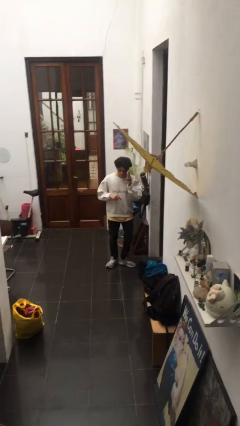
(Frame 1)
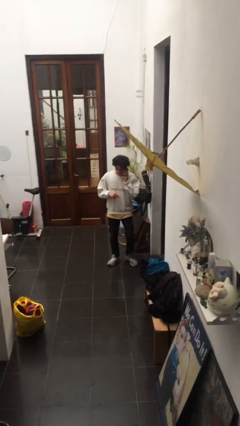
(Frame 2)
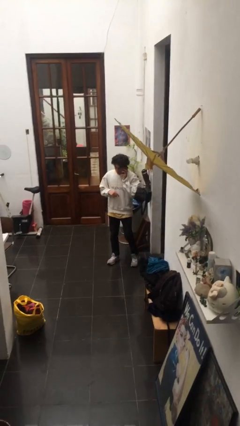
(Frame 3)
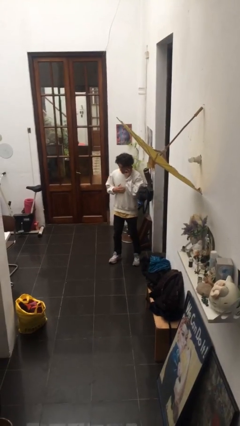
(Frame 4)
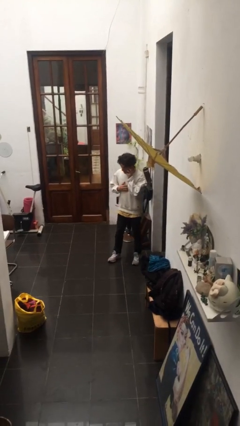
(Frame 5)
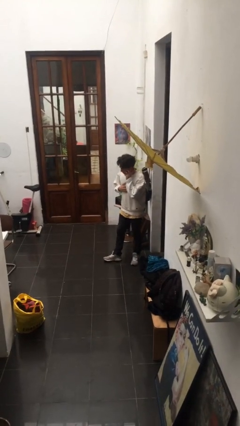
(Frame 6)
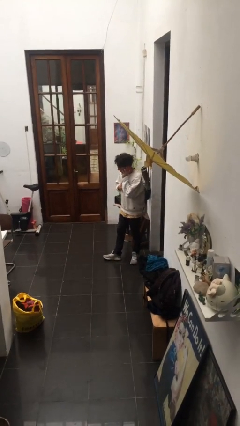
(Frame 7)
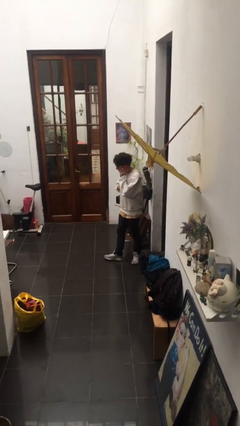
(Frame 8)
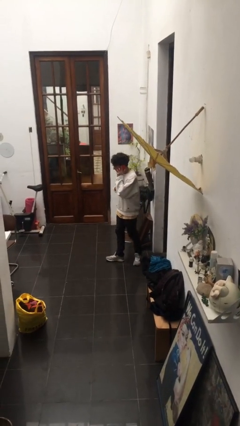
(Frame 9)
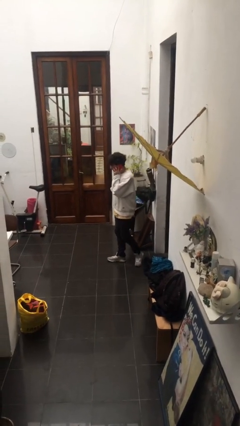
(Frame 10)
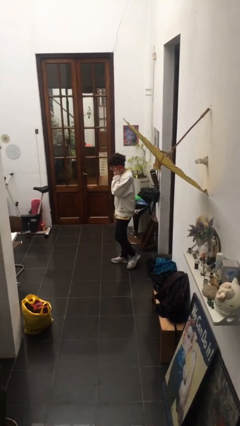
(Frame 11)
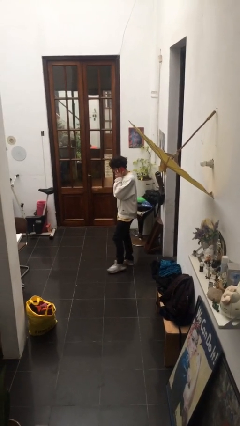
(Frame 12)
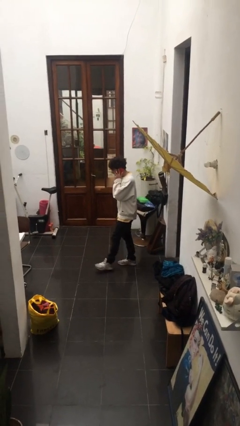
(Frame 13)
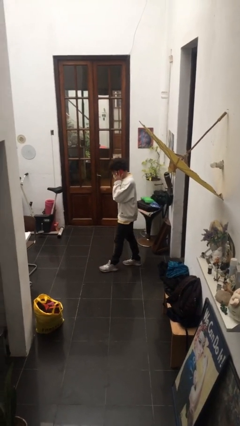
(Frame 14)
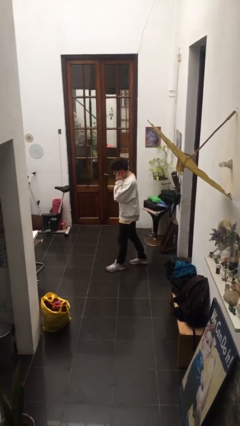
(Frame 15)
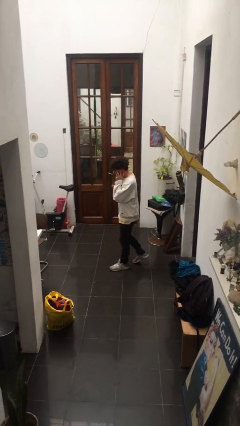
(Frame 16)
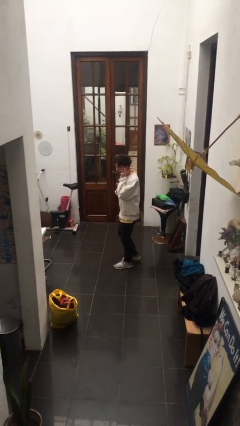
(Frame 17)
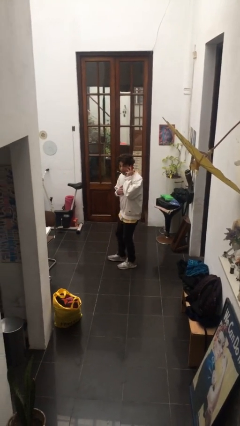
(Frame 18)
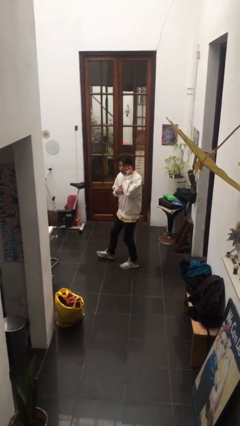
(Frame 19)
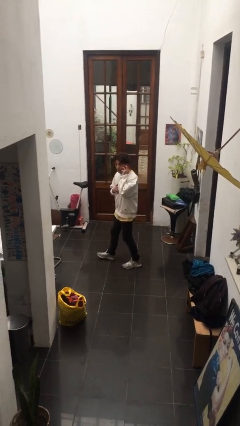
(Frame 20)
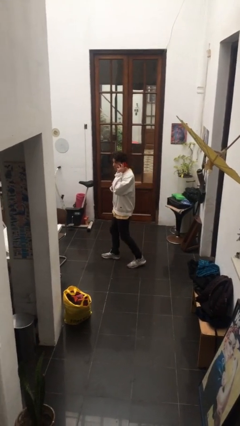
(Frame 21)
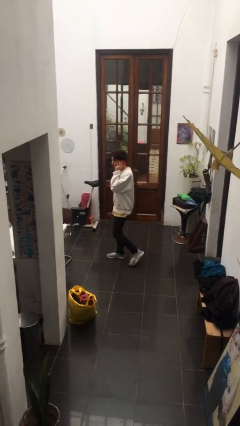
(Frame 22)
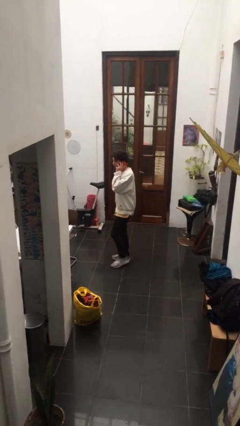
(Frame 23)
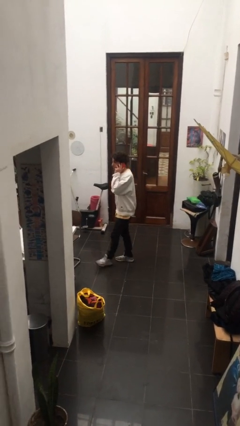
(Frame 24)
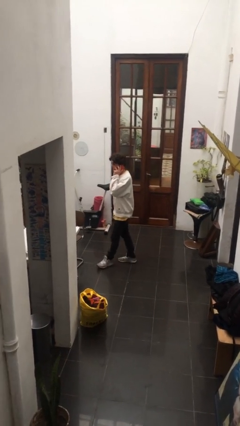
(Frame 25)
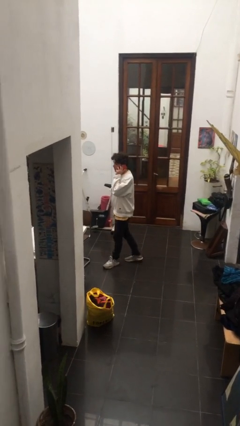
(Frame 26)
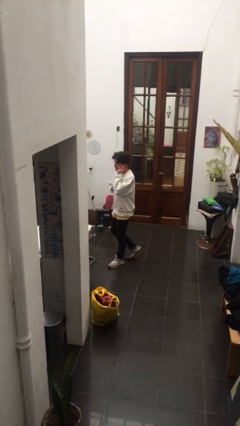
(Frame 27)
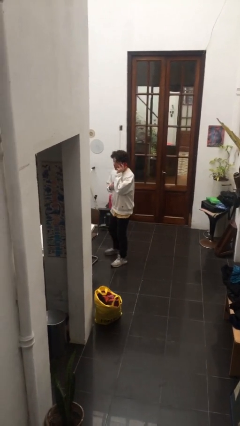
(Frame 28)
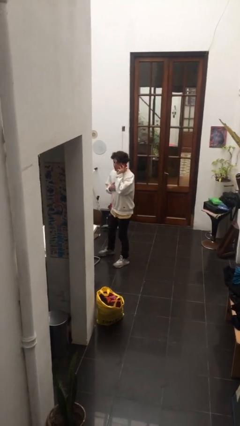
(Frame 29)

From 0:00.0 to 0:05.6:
person talks on phone

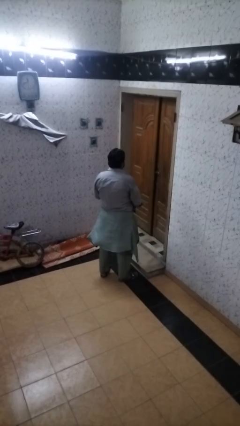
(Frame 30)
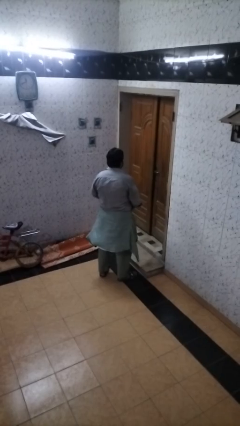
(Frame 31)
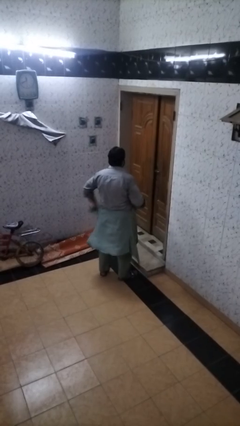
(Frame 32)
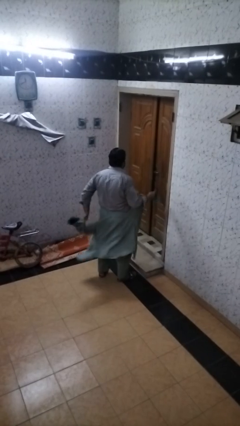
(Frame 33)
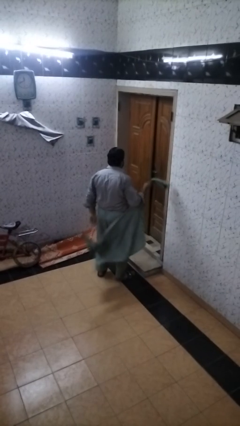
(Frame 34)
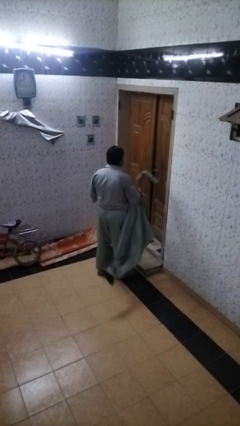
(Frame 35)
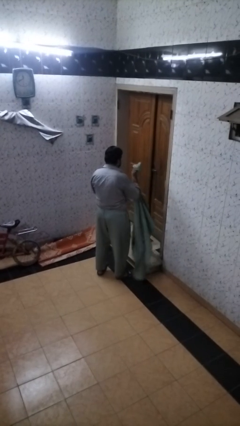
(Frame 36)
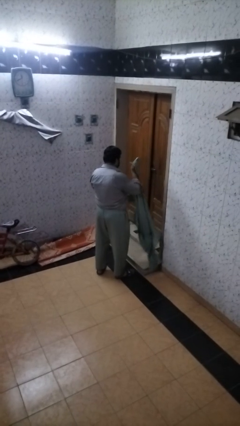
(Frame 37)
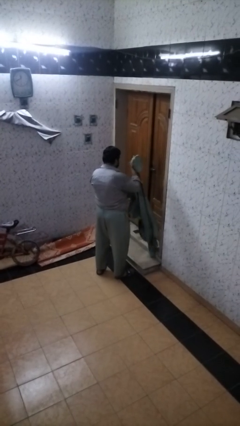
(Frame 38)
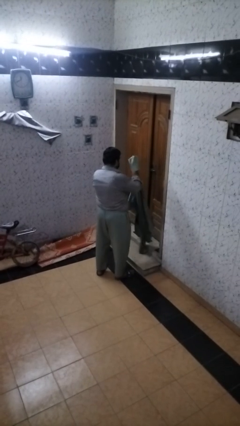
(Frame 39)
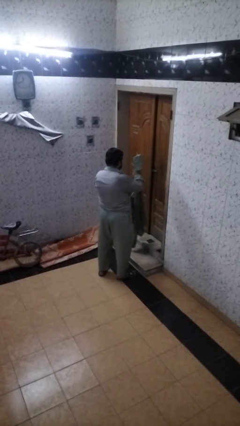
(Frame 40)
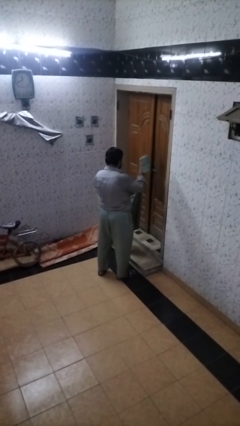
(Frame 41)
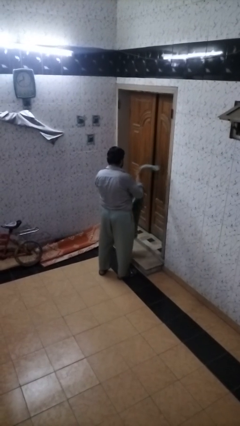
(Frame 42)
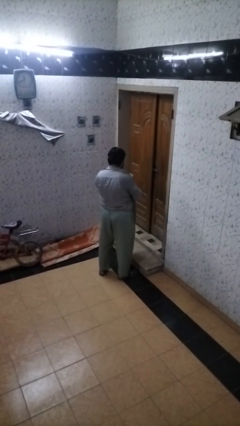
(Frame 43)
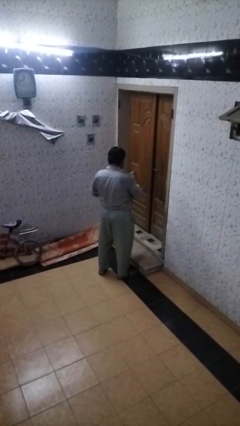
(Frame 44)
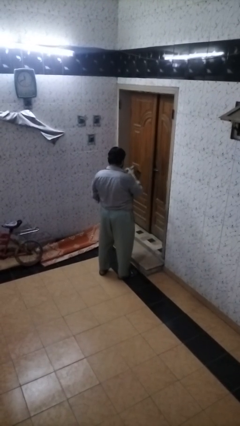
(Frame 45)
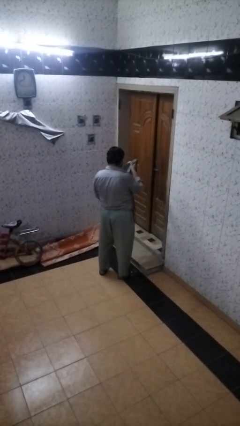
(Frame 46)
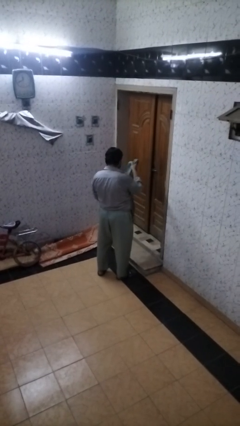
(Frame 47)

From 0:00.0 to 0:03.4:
person unties jacket around waist

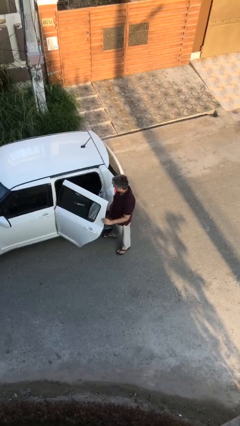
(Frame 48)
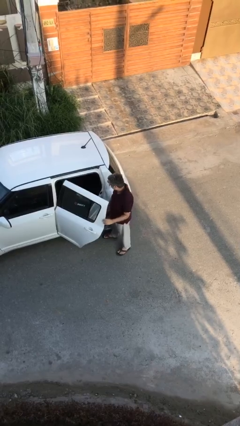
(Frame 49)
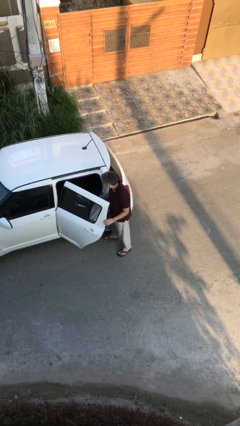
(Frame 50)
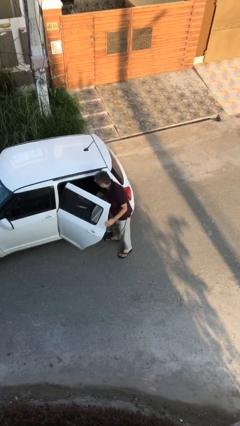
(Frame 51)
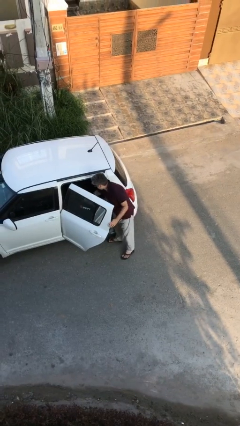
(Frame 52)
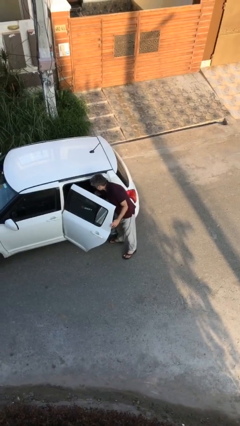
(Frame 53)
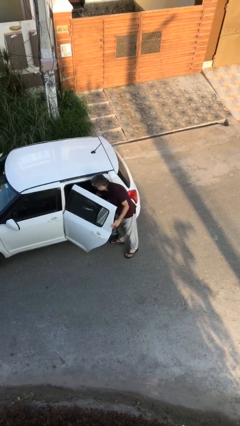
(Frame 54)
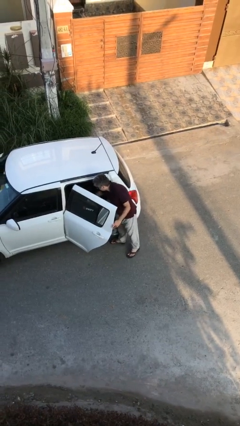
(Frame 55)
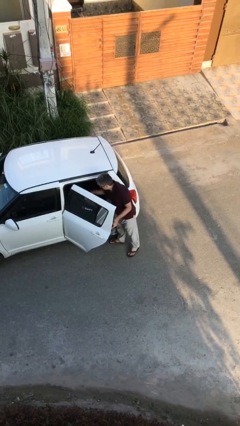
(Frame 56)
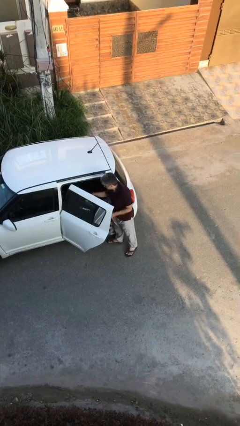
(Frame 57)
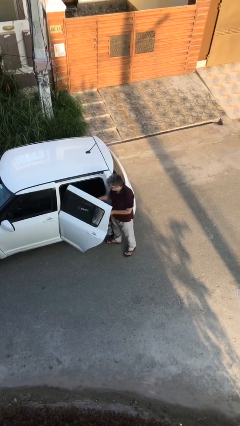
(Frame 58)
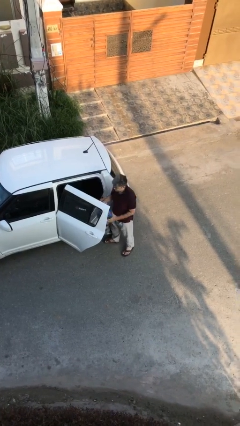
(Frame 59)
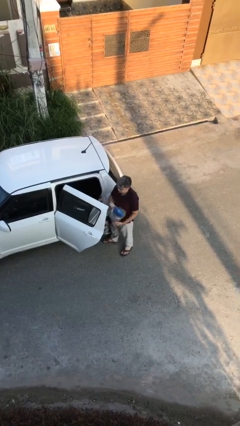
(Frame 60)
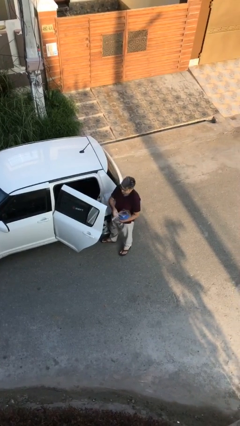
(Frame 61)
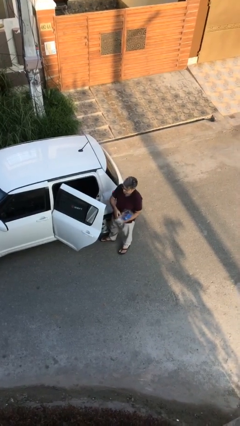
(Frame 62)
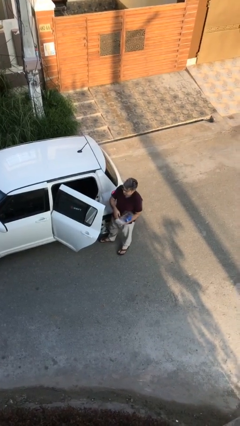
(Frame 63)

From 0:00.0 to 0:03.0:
person unloads car

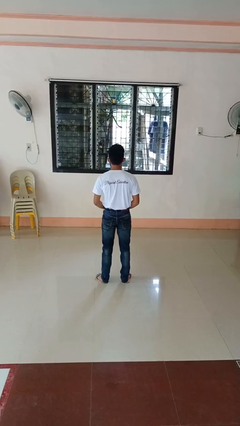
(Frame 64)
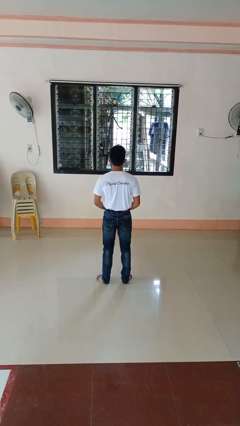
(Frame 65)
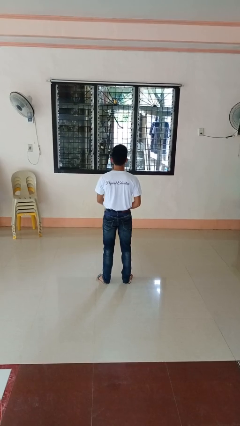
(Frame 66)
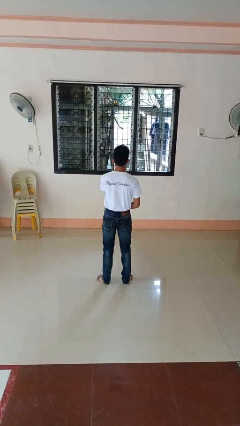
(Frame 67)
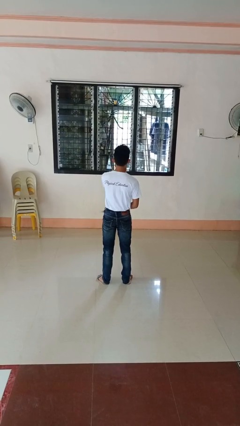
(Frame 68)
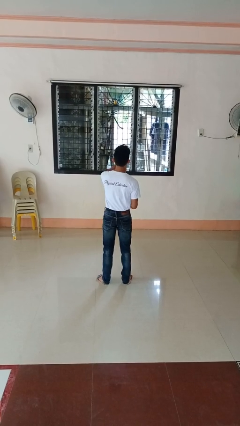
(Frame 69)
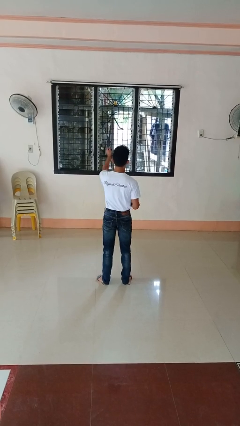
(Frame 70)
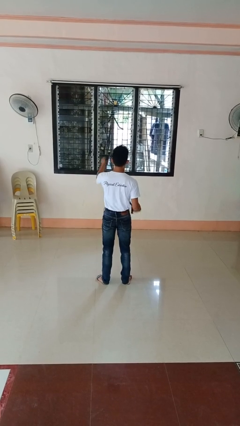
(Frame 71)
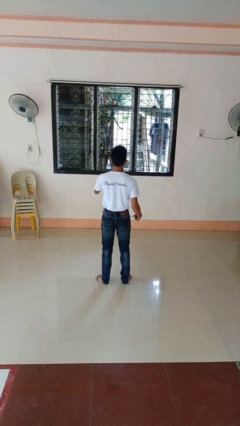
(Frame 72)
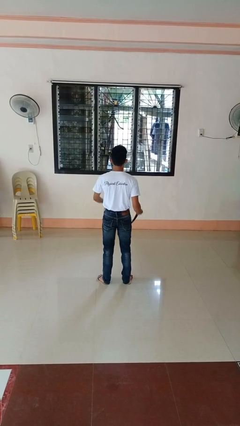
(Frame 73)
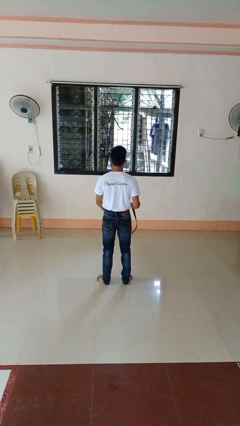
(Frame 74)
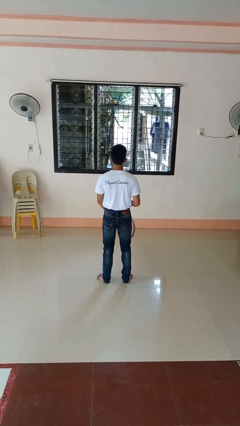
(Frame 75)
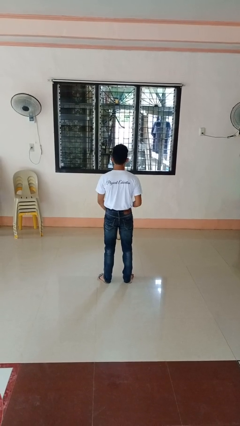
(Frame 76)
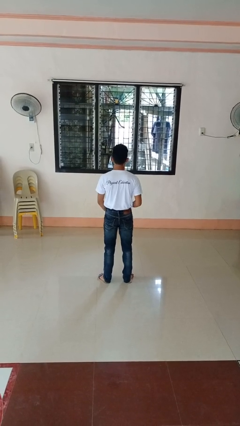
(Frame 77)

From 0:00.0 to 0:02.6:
person takes off belt

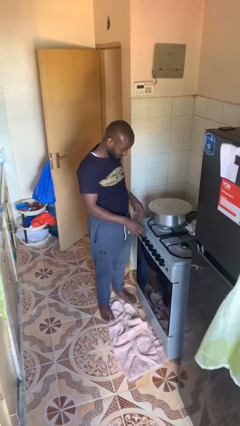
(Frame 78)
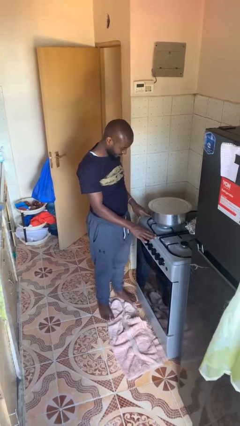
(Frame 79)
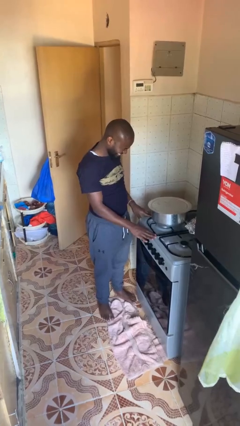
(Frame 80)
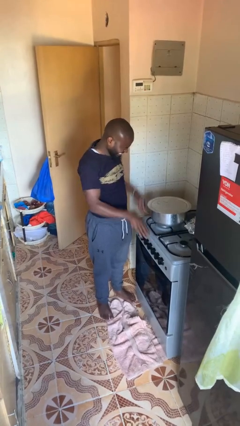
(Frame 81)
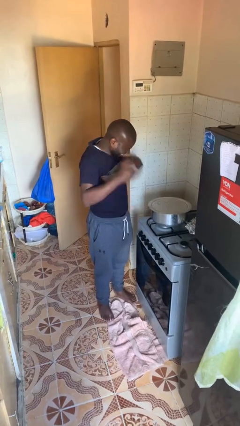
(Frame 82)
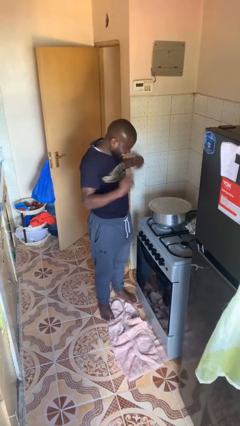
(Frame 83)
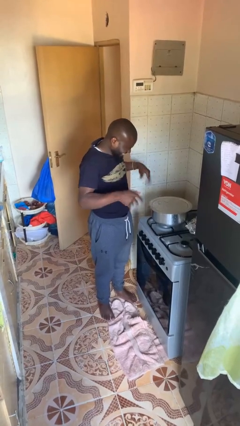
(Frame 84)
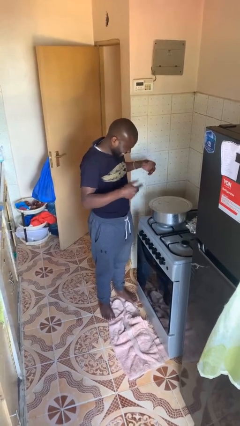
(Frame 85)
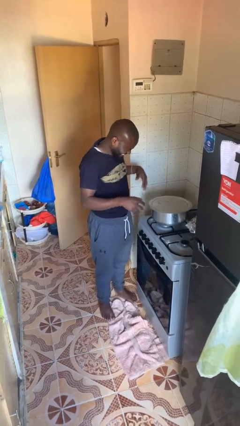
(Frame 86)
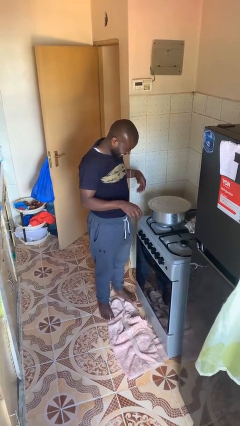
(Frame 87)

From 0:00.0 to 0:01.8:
person burns hand

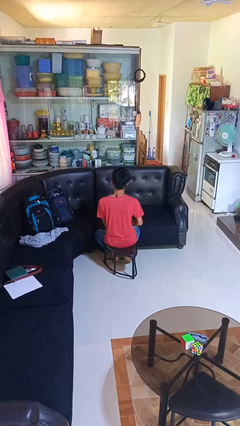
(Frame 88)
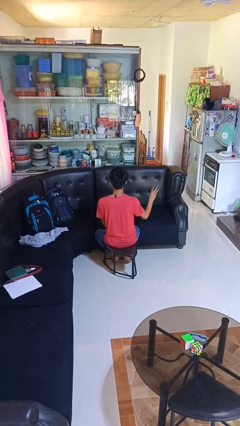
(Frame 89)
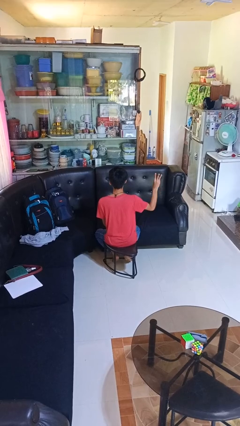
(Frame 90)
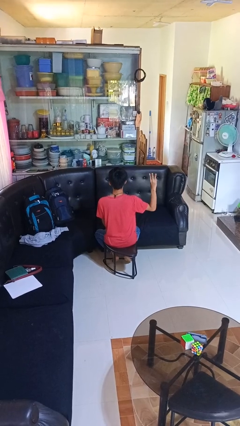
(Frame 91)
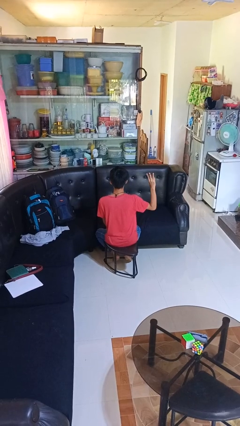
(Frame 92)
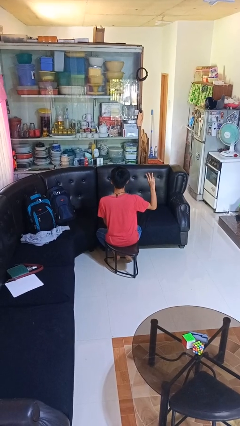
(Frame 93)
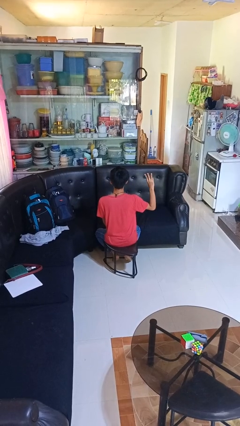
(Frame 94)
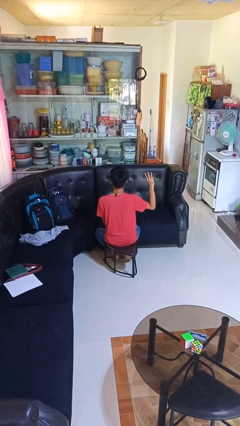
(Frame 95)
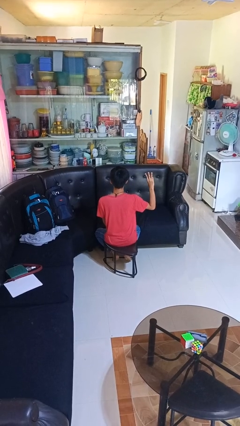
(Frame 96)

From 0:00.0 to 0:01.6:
person gestures number three
